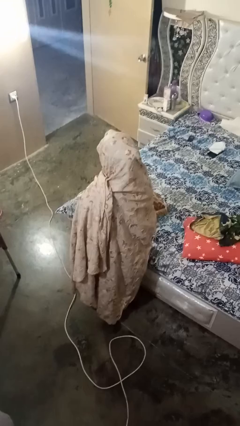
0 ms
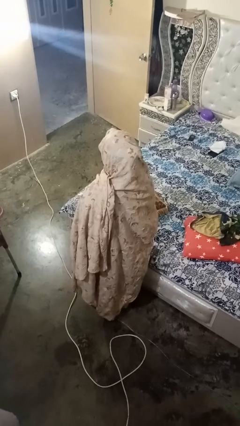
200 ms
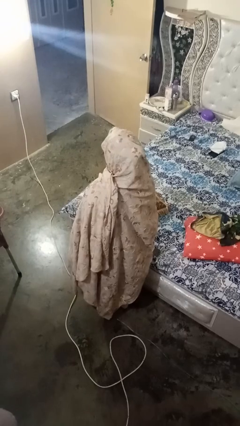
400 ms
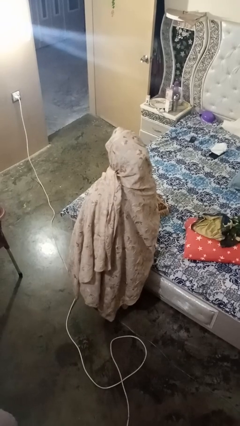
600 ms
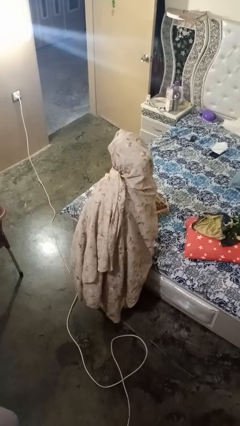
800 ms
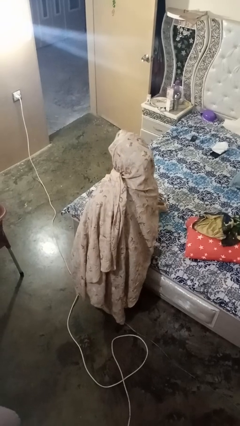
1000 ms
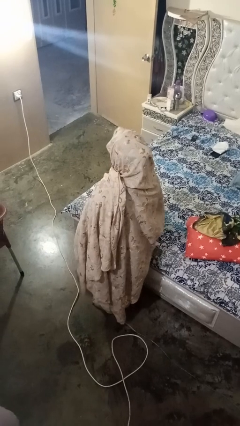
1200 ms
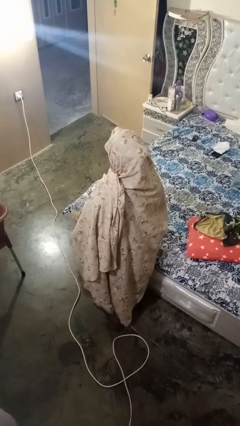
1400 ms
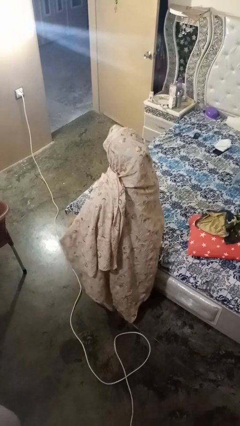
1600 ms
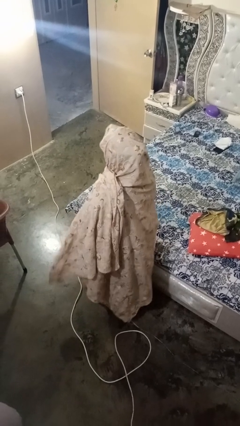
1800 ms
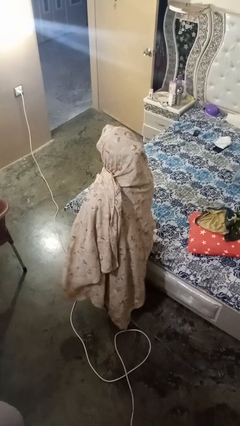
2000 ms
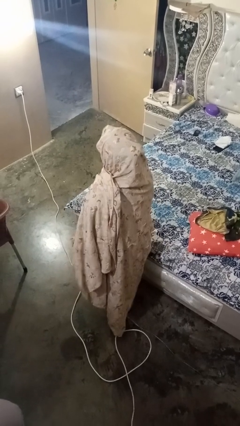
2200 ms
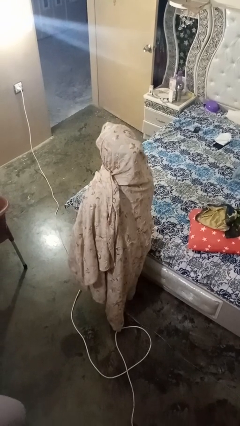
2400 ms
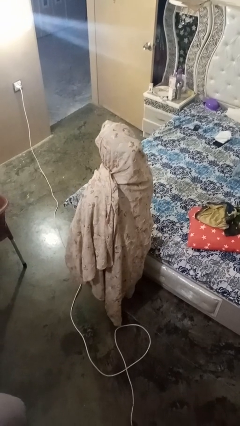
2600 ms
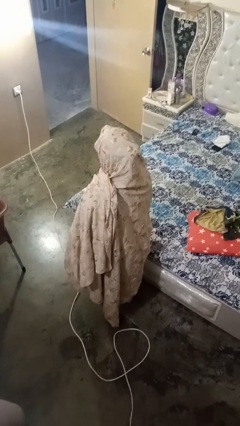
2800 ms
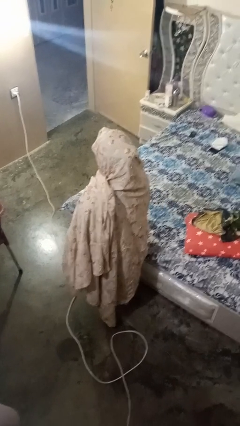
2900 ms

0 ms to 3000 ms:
person picks up object from bed

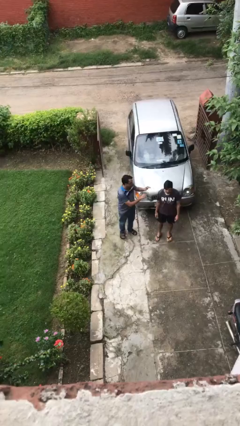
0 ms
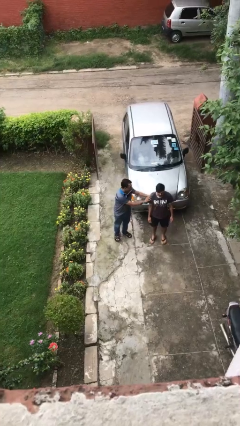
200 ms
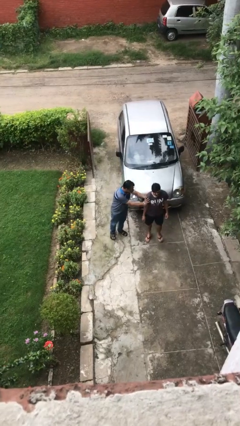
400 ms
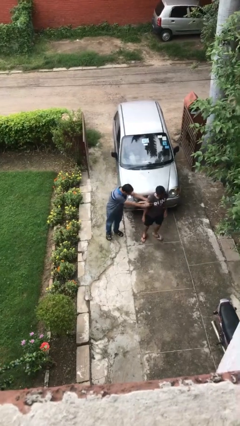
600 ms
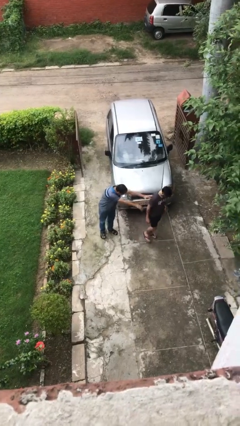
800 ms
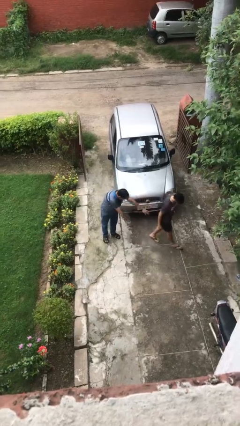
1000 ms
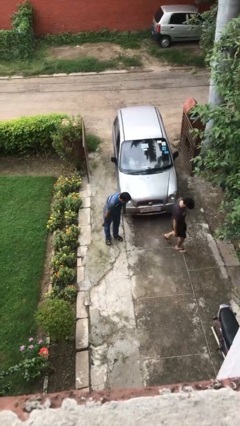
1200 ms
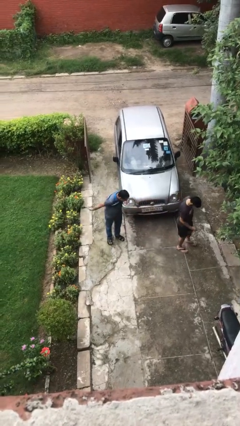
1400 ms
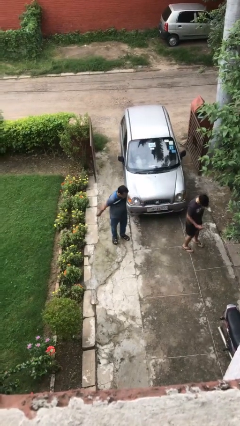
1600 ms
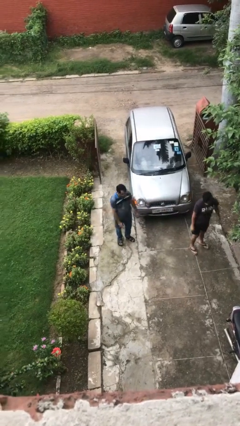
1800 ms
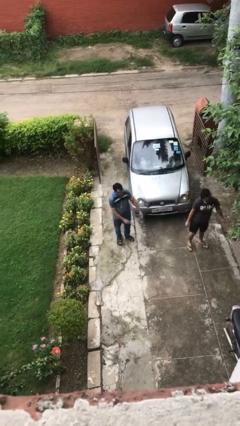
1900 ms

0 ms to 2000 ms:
person shoves person

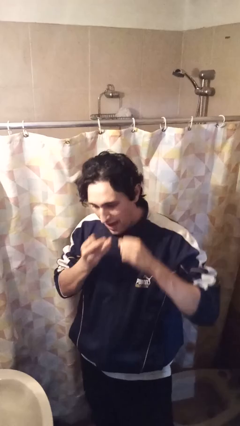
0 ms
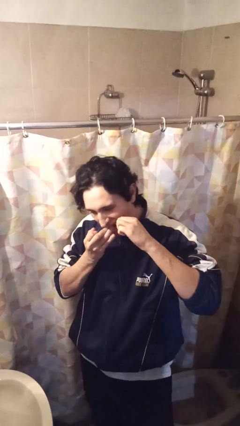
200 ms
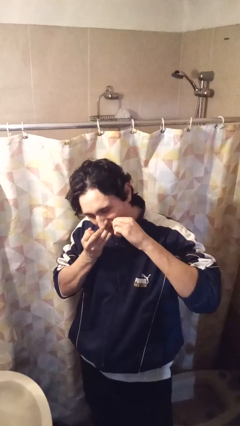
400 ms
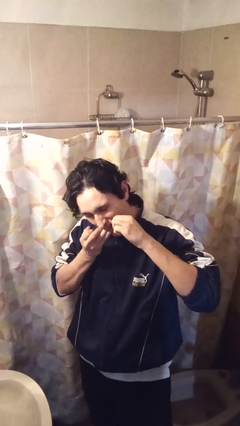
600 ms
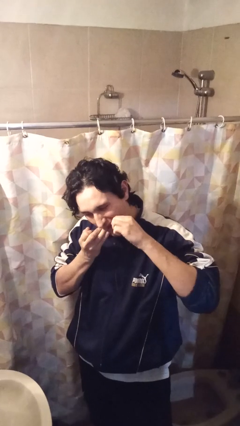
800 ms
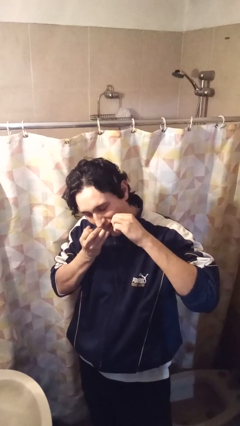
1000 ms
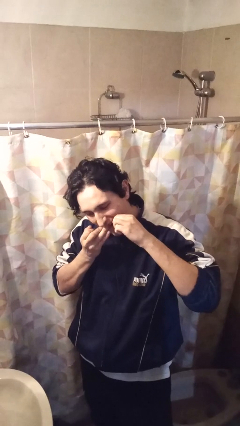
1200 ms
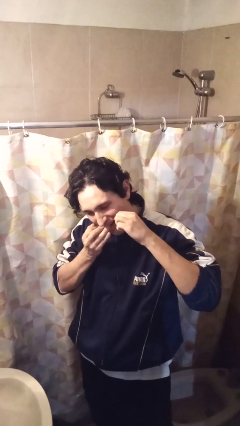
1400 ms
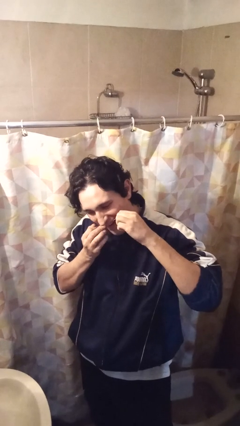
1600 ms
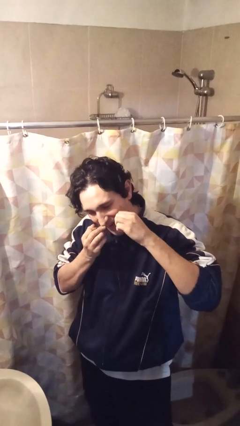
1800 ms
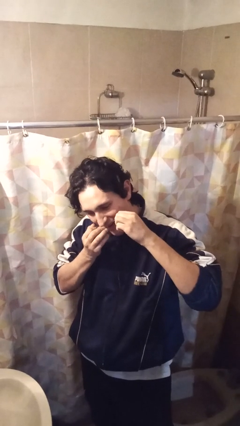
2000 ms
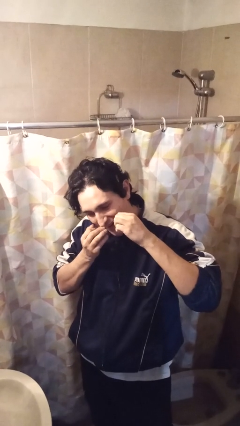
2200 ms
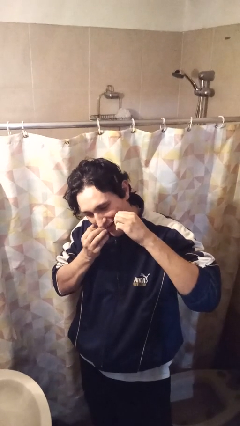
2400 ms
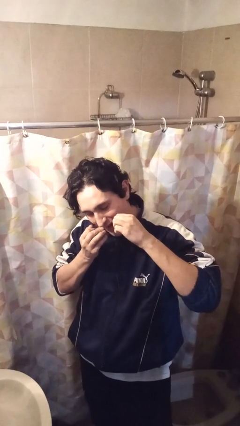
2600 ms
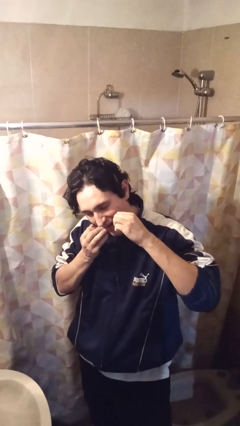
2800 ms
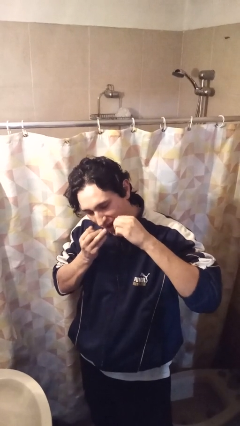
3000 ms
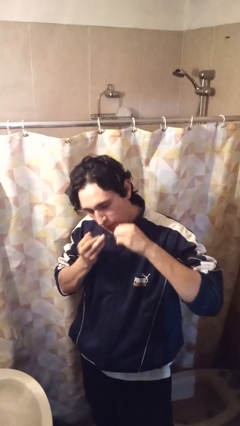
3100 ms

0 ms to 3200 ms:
person flosses

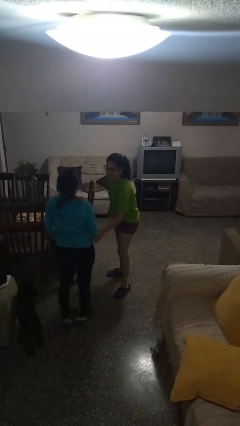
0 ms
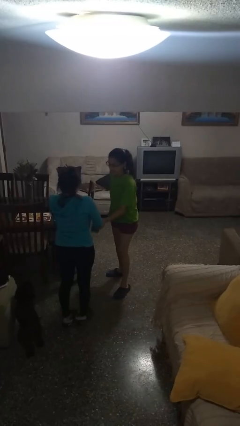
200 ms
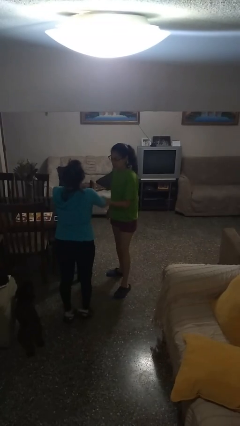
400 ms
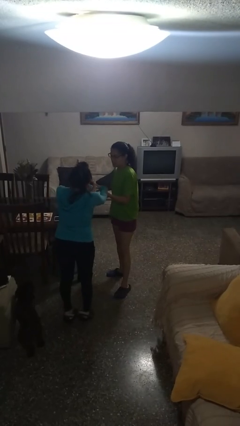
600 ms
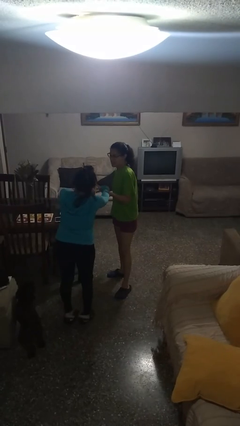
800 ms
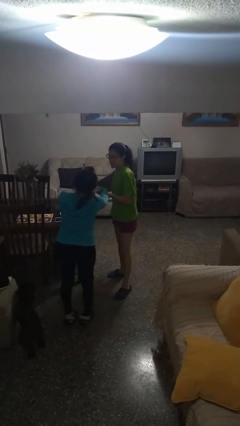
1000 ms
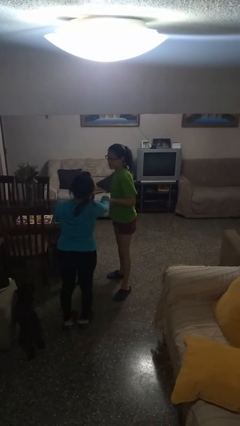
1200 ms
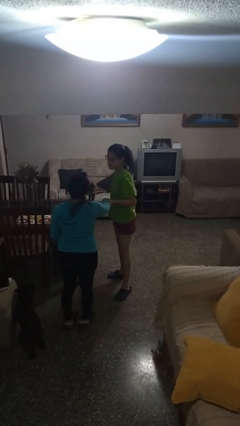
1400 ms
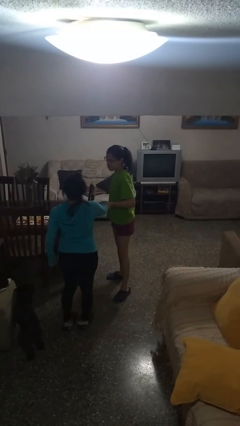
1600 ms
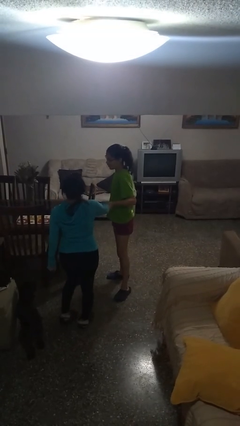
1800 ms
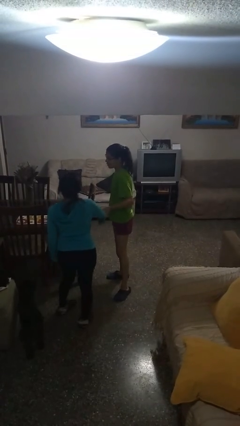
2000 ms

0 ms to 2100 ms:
person grabs person by forearm

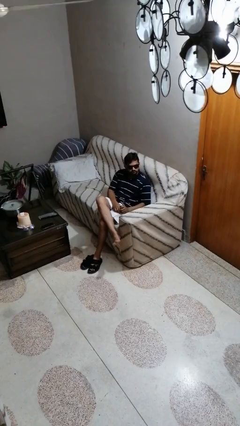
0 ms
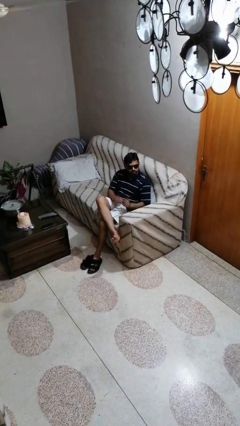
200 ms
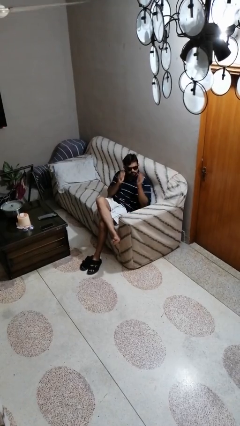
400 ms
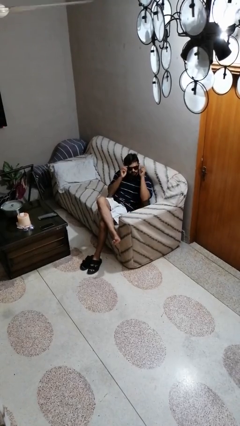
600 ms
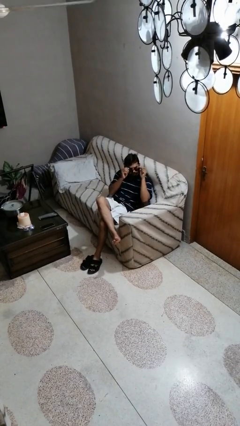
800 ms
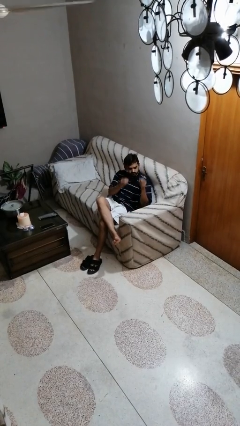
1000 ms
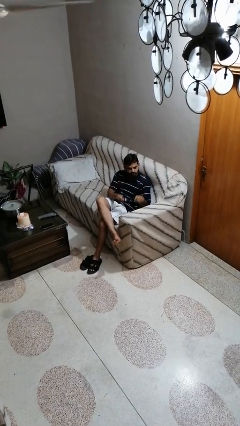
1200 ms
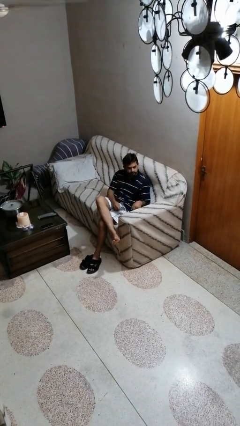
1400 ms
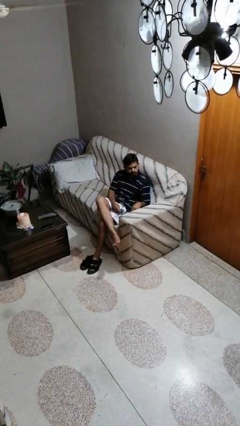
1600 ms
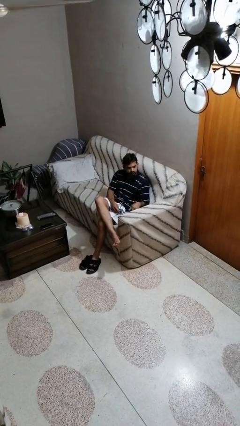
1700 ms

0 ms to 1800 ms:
person takes off sunglasses

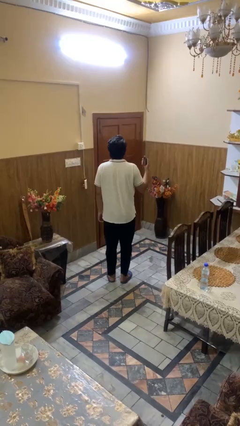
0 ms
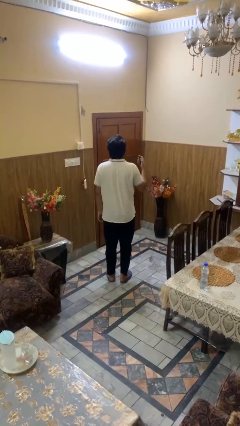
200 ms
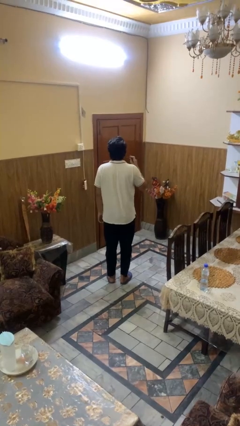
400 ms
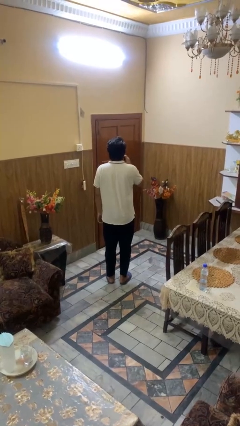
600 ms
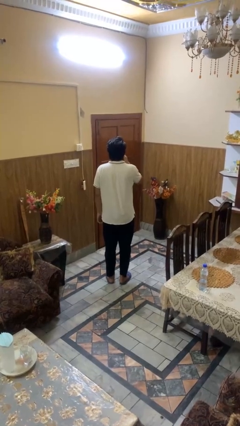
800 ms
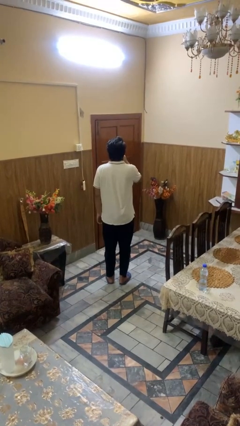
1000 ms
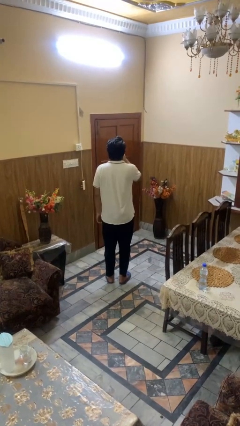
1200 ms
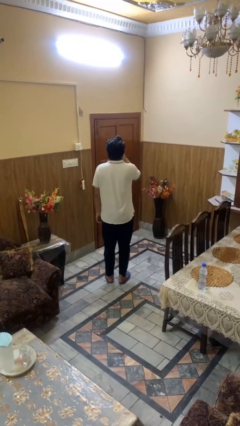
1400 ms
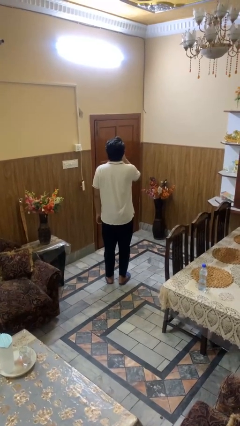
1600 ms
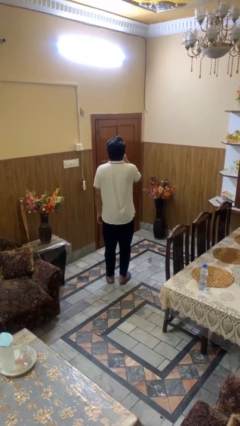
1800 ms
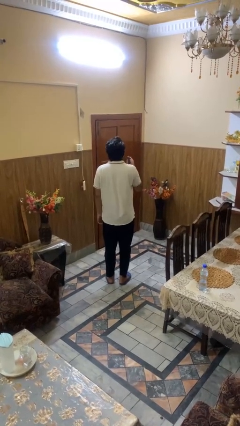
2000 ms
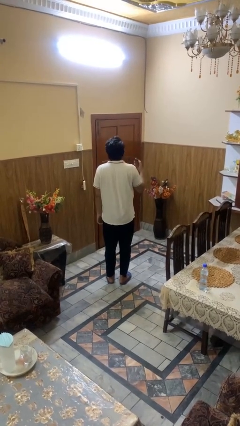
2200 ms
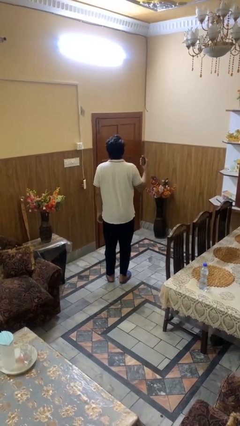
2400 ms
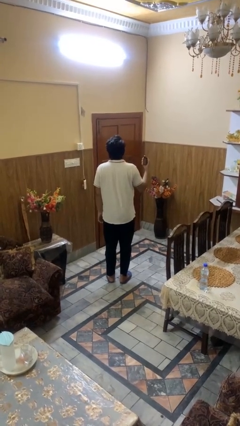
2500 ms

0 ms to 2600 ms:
person vapes

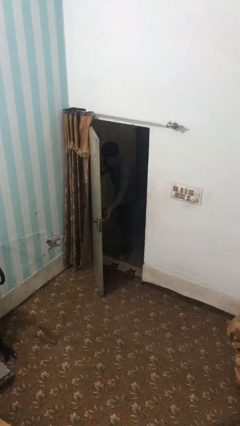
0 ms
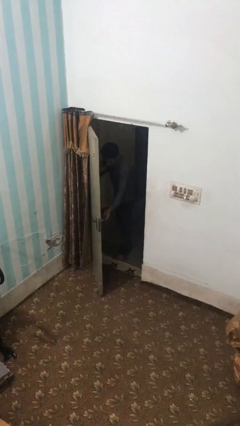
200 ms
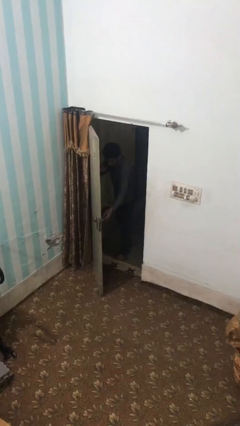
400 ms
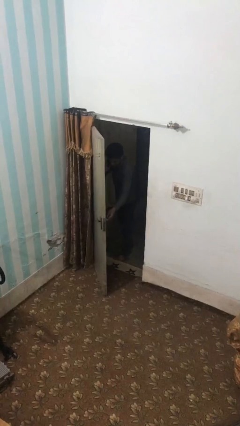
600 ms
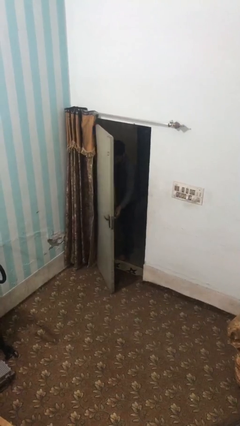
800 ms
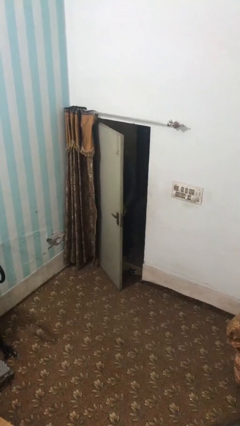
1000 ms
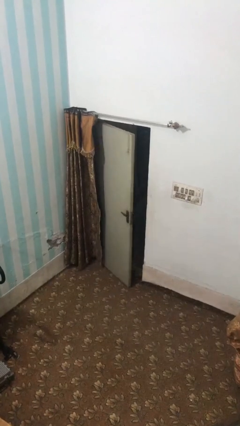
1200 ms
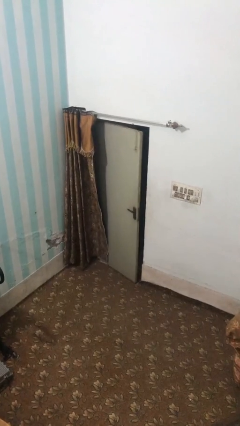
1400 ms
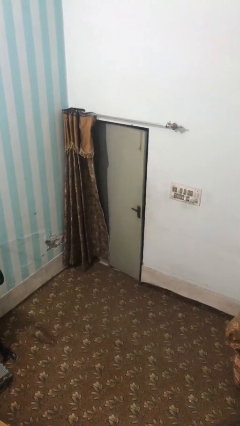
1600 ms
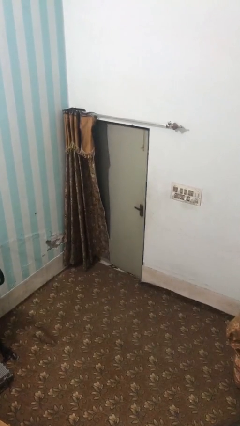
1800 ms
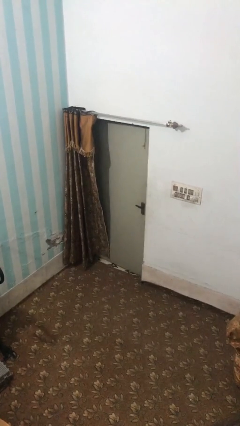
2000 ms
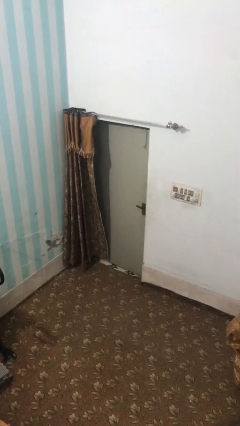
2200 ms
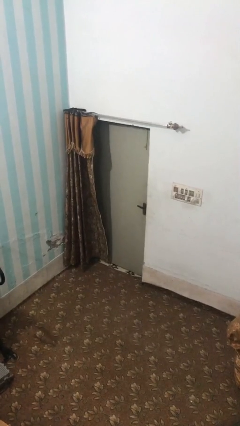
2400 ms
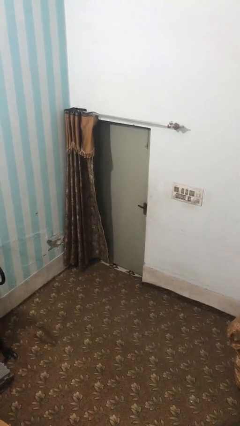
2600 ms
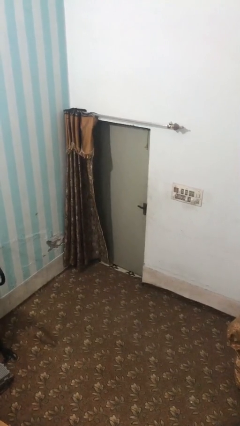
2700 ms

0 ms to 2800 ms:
person closes facility door
